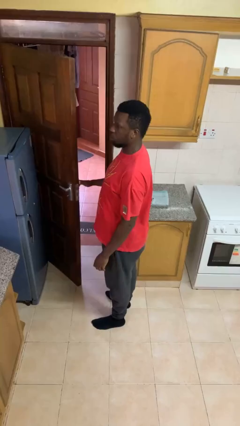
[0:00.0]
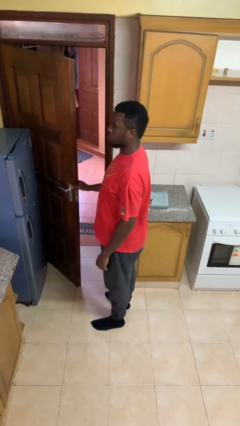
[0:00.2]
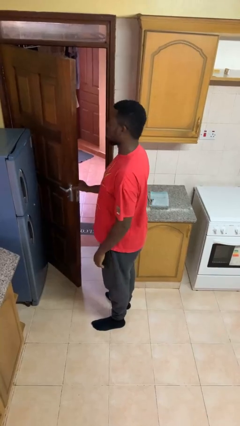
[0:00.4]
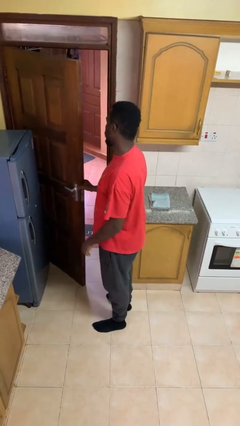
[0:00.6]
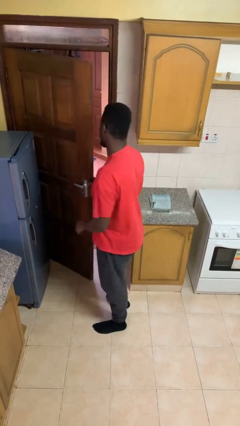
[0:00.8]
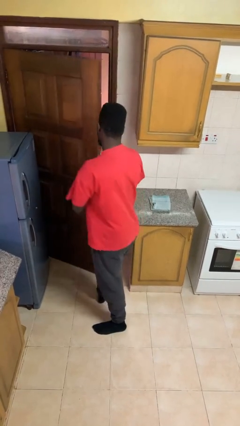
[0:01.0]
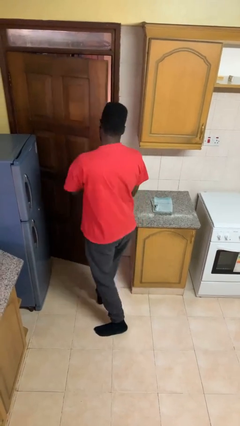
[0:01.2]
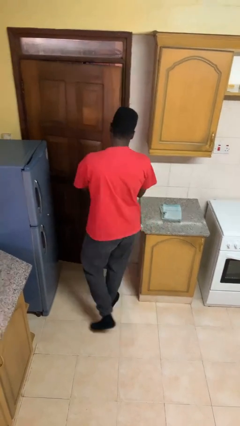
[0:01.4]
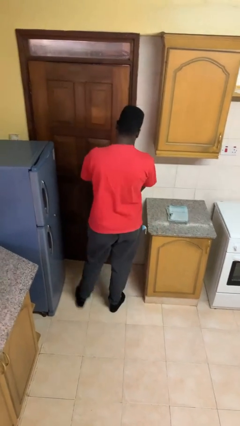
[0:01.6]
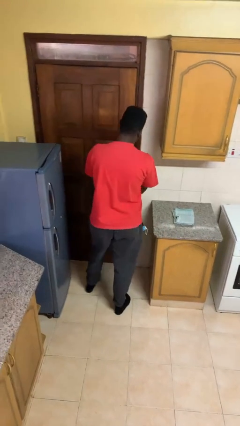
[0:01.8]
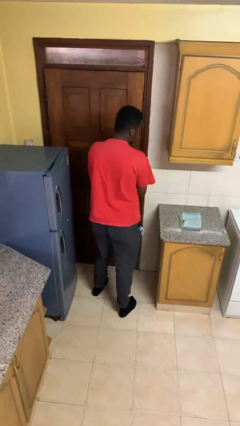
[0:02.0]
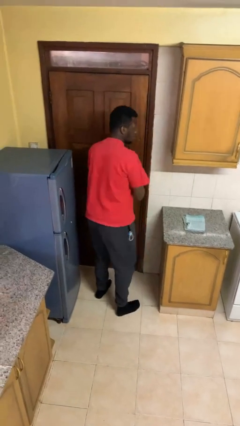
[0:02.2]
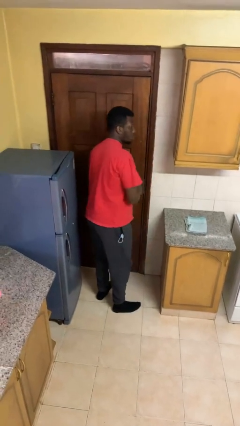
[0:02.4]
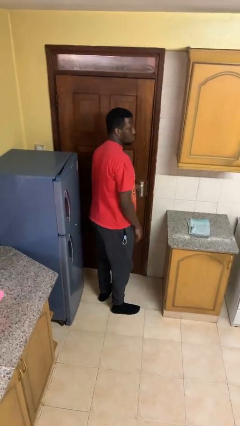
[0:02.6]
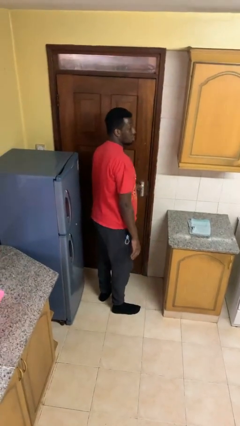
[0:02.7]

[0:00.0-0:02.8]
person closes facility door

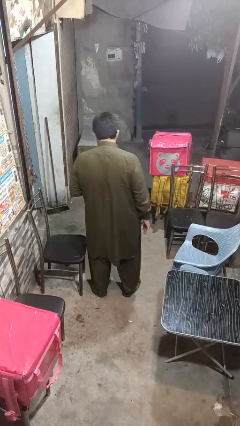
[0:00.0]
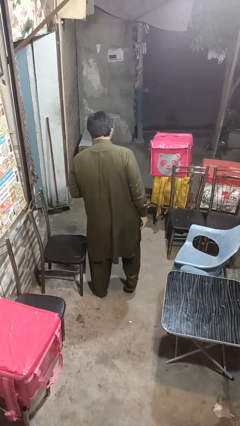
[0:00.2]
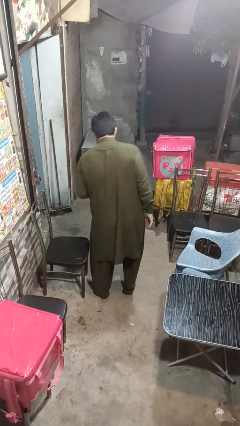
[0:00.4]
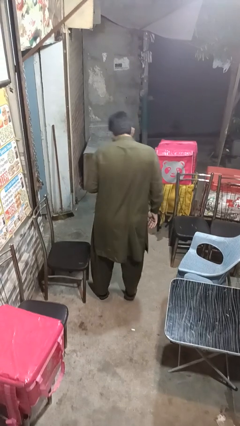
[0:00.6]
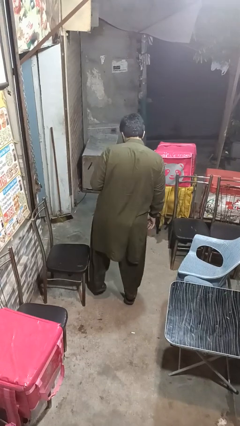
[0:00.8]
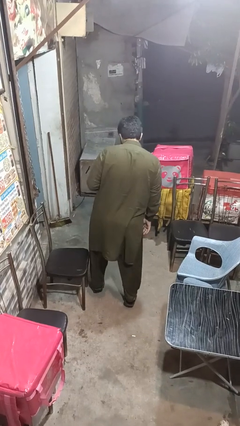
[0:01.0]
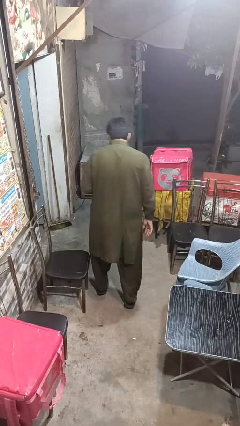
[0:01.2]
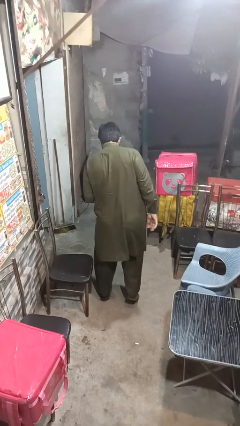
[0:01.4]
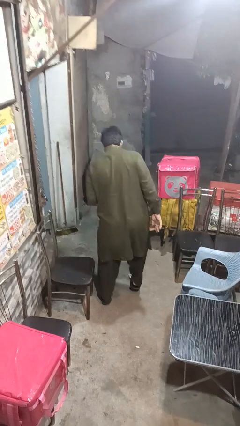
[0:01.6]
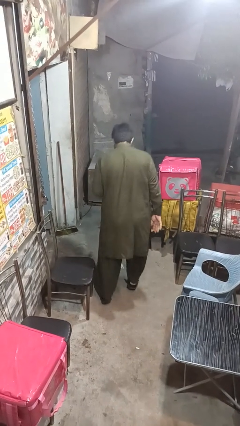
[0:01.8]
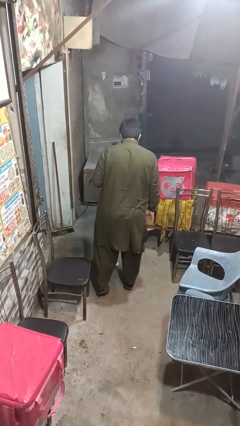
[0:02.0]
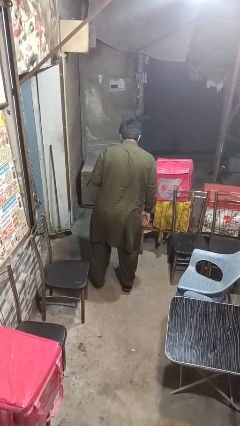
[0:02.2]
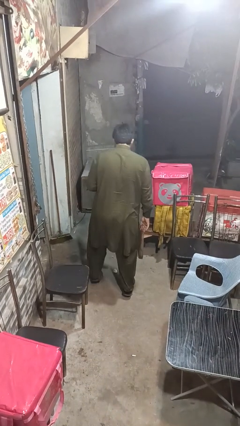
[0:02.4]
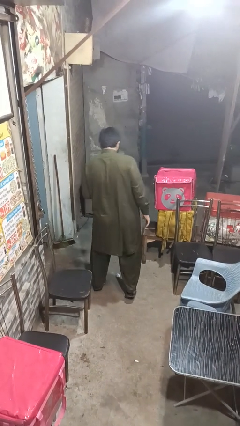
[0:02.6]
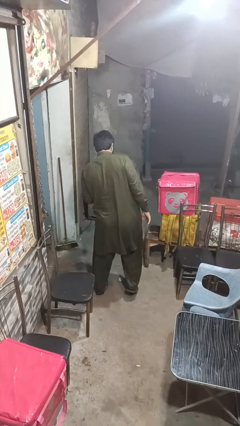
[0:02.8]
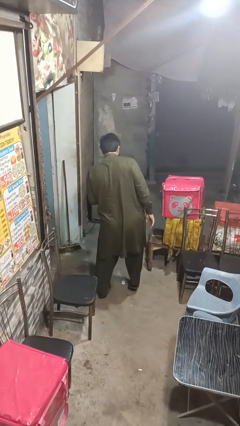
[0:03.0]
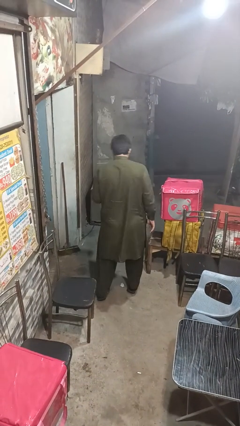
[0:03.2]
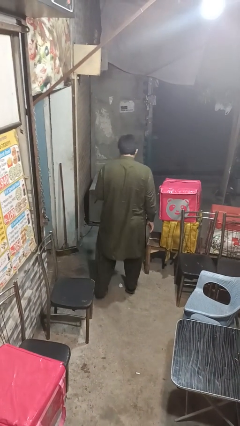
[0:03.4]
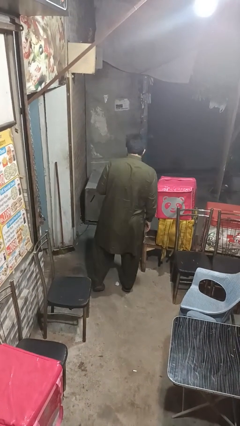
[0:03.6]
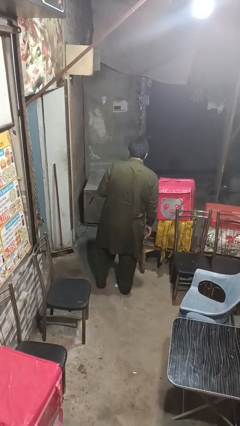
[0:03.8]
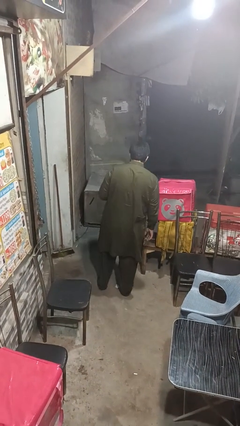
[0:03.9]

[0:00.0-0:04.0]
person walks tiptoe

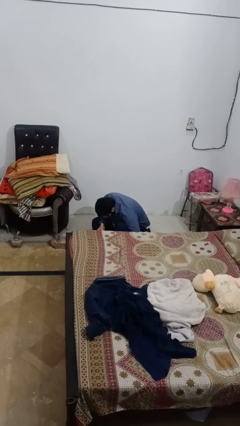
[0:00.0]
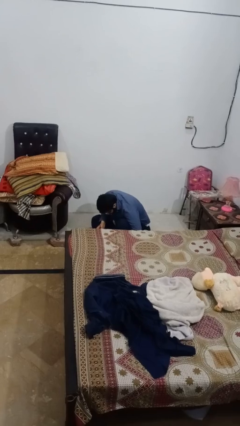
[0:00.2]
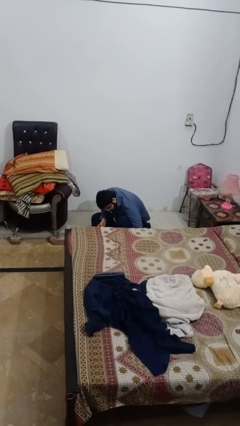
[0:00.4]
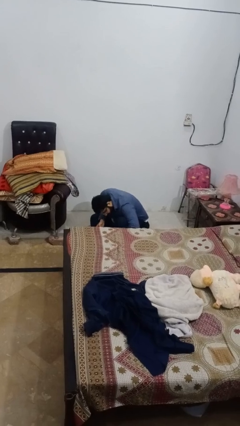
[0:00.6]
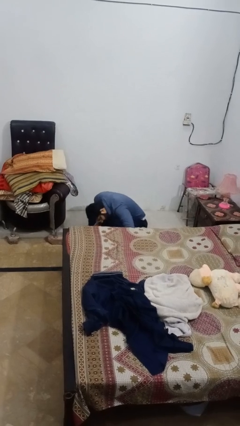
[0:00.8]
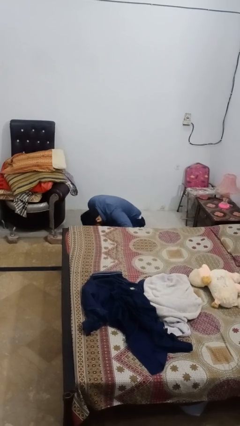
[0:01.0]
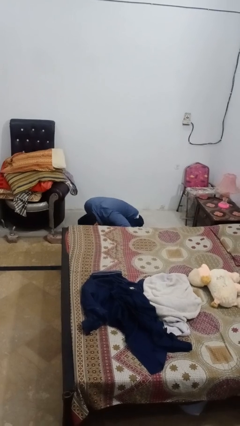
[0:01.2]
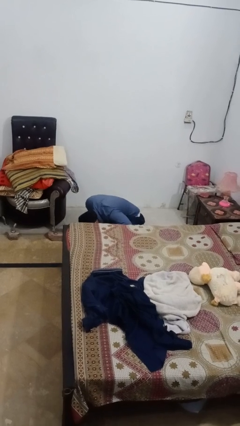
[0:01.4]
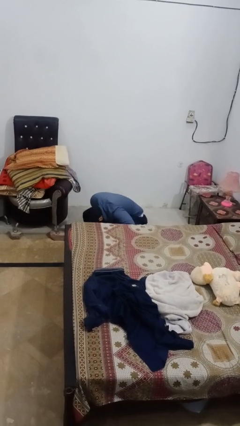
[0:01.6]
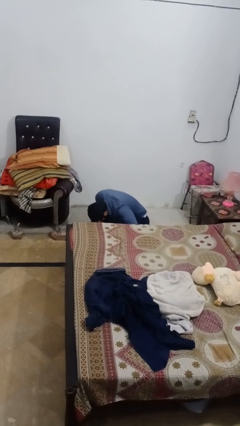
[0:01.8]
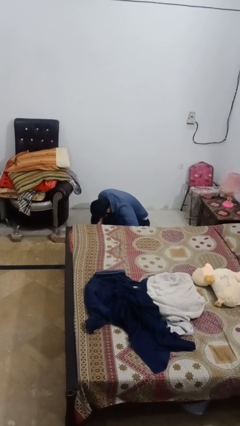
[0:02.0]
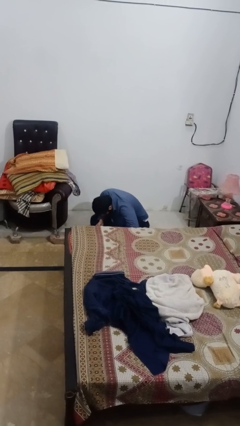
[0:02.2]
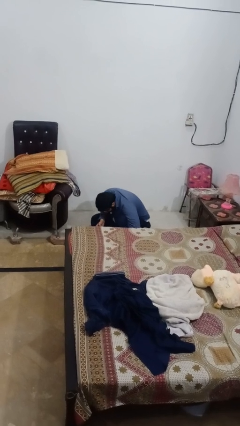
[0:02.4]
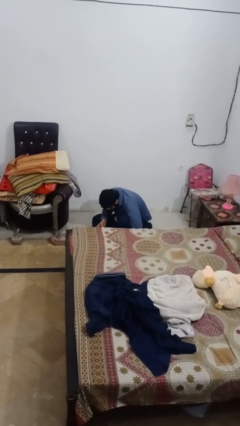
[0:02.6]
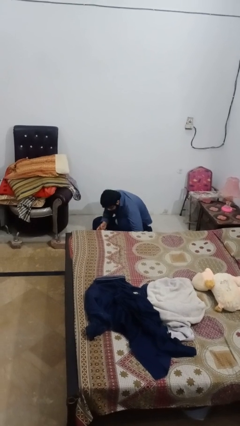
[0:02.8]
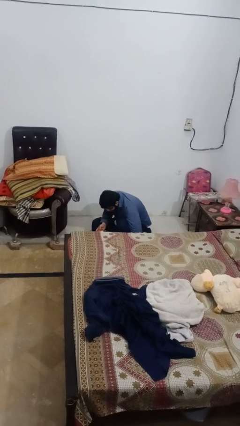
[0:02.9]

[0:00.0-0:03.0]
person searches under bed

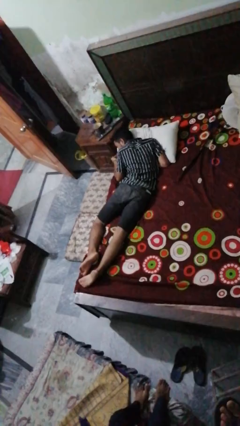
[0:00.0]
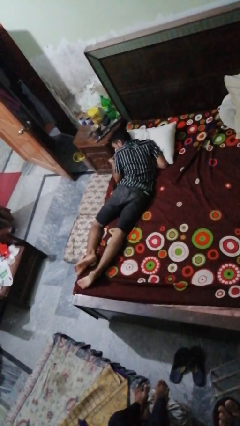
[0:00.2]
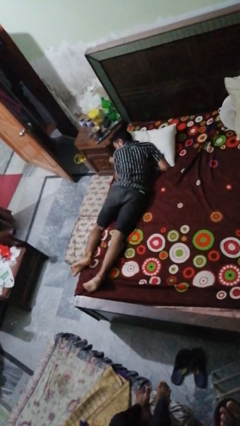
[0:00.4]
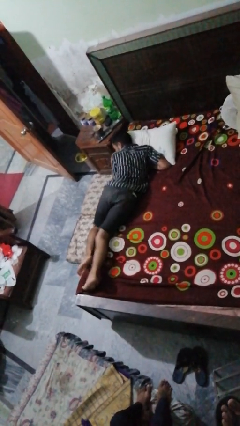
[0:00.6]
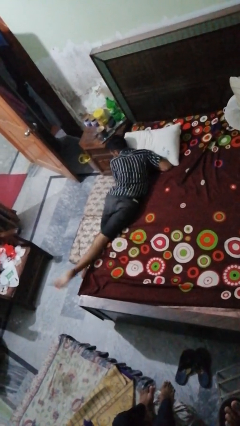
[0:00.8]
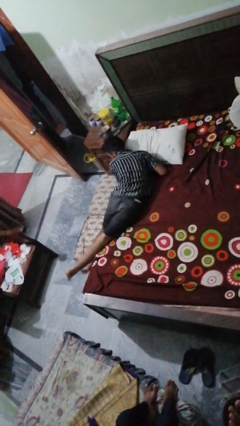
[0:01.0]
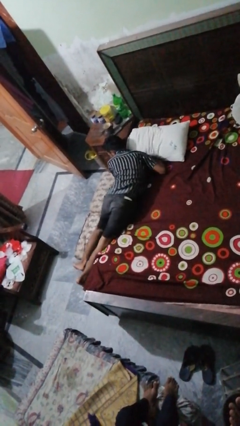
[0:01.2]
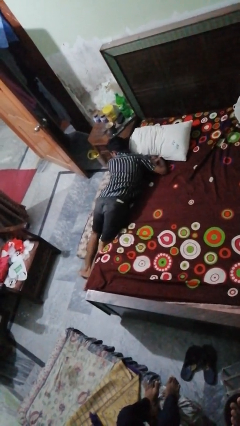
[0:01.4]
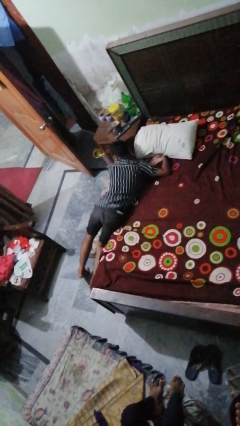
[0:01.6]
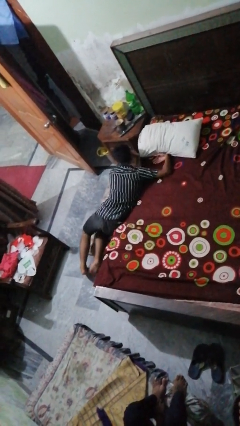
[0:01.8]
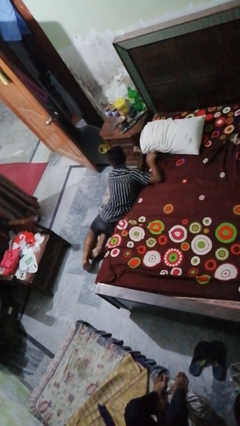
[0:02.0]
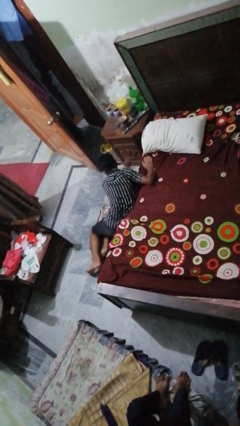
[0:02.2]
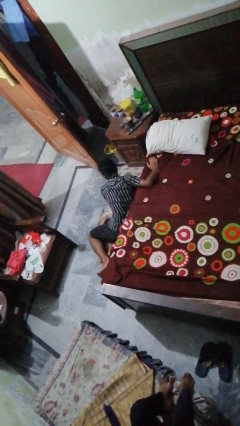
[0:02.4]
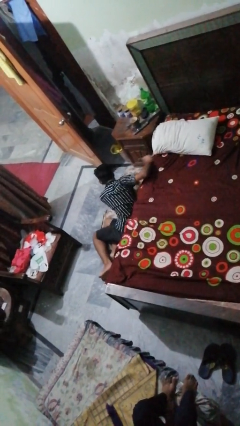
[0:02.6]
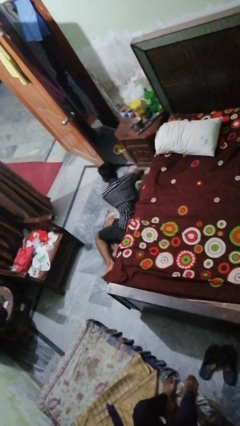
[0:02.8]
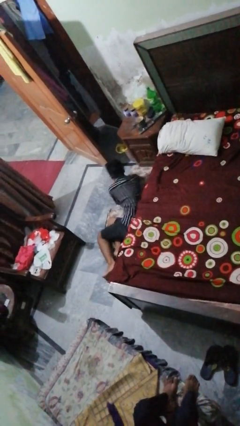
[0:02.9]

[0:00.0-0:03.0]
person falls from bed

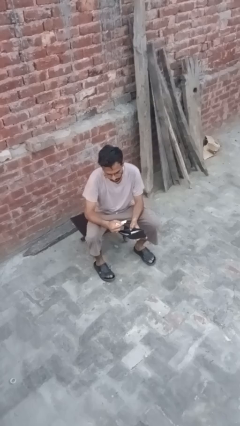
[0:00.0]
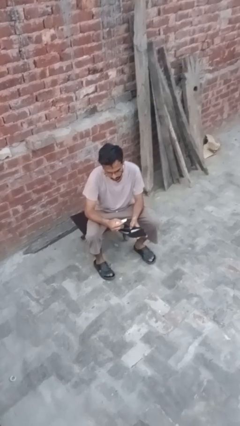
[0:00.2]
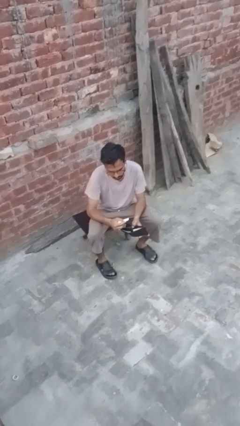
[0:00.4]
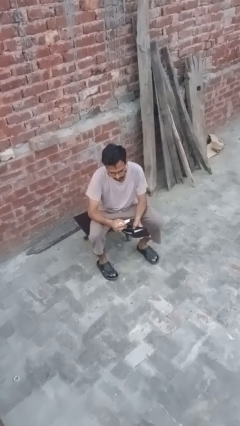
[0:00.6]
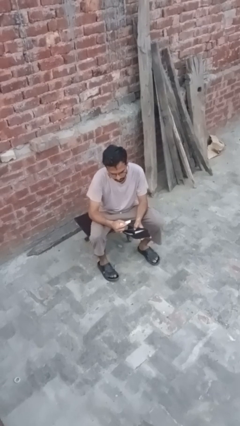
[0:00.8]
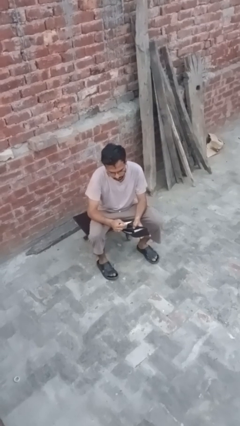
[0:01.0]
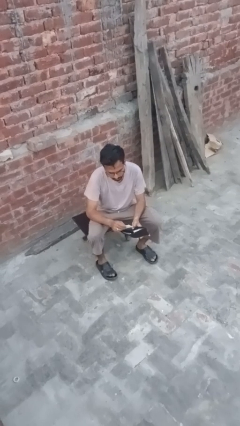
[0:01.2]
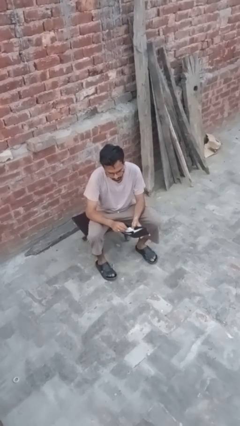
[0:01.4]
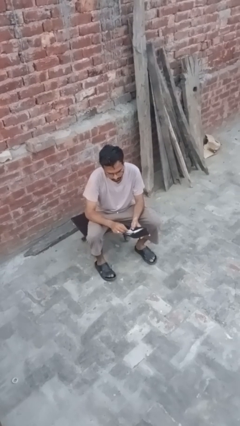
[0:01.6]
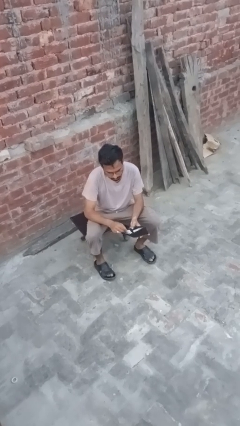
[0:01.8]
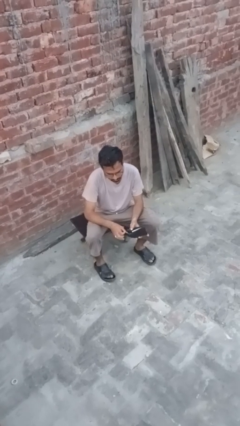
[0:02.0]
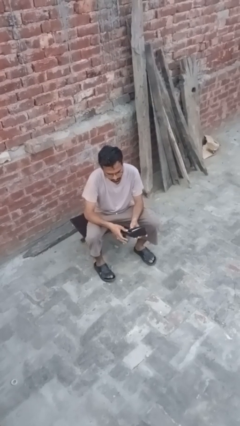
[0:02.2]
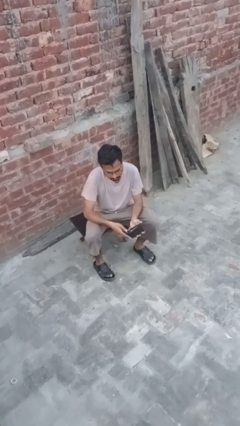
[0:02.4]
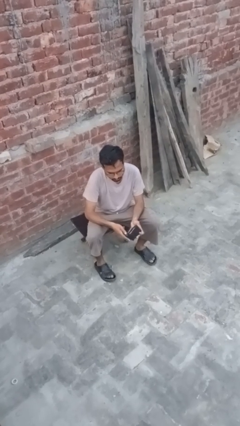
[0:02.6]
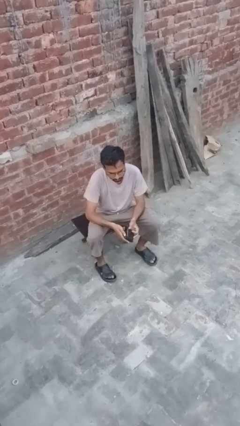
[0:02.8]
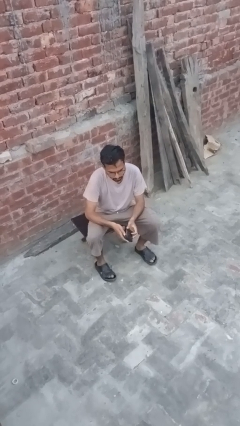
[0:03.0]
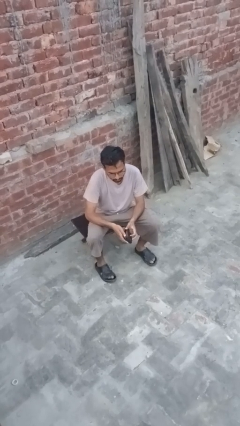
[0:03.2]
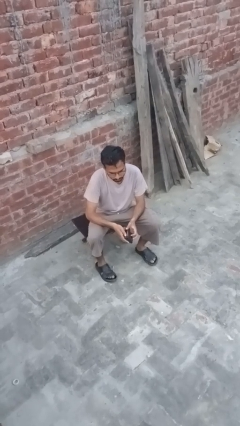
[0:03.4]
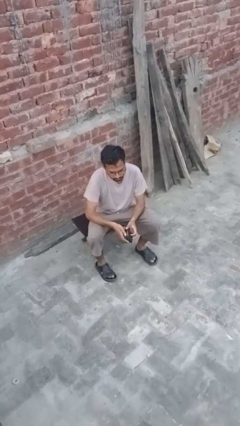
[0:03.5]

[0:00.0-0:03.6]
person puts object into purse

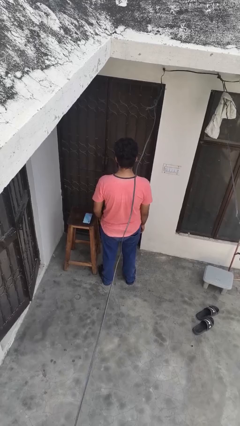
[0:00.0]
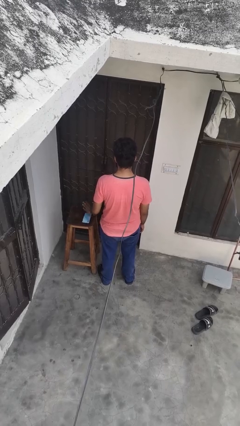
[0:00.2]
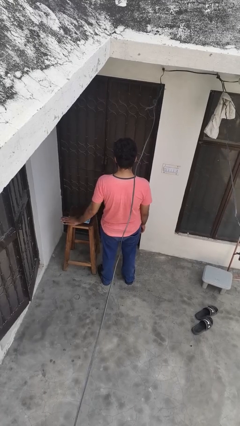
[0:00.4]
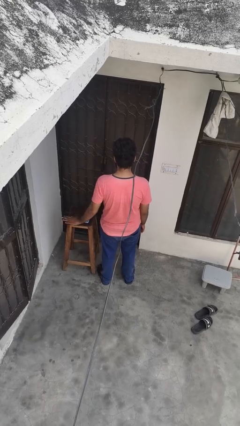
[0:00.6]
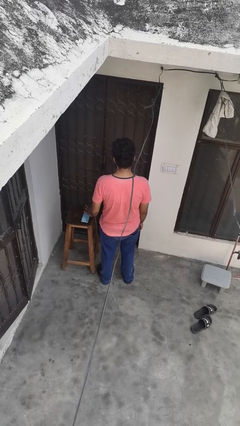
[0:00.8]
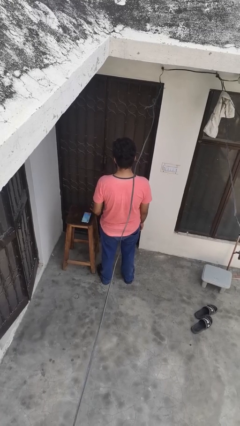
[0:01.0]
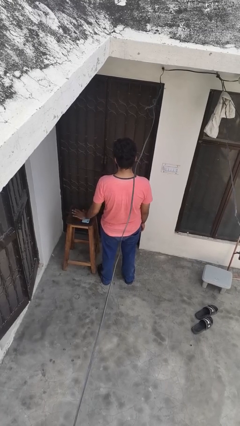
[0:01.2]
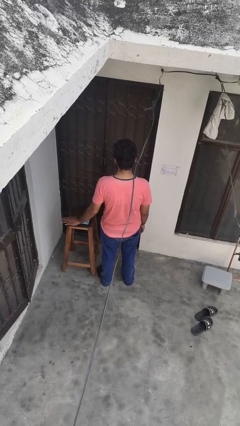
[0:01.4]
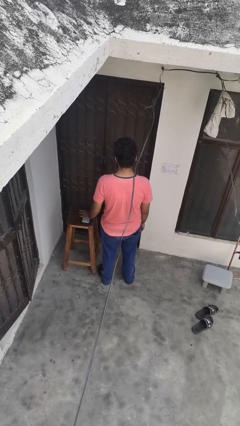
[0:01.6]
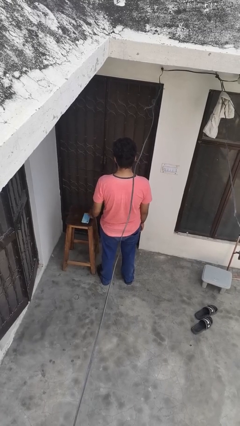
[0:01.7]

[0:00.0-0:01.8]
person waves hand over object
